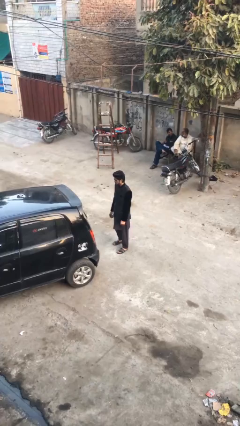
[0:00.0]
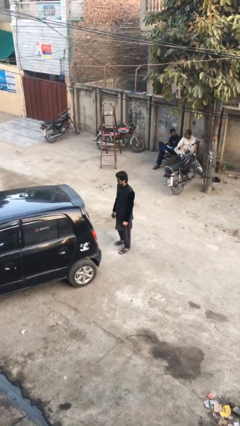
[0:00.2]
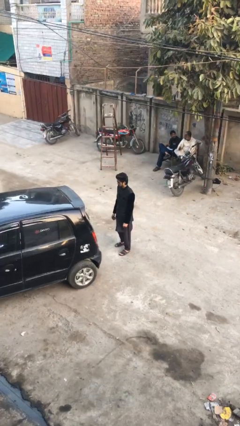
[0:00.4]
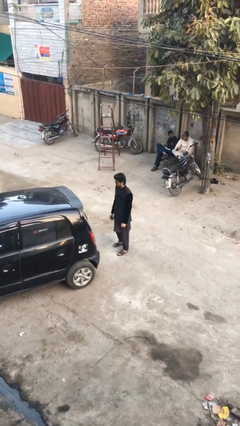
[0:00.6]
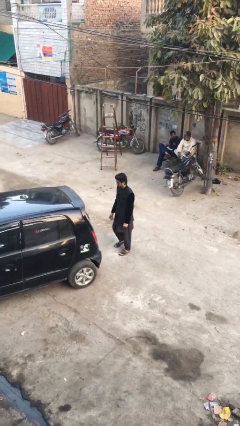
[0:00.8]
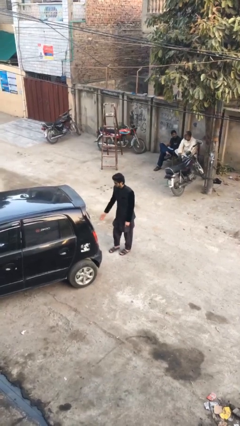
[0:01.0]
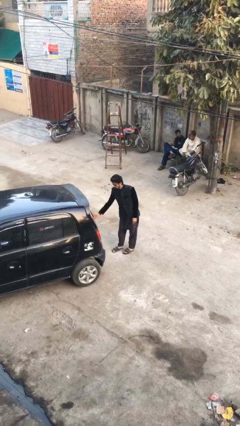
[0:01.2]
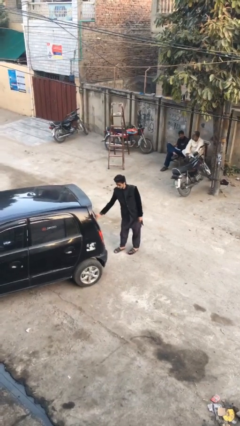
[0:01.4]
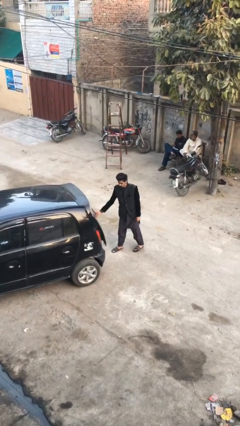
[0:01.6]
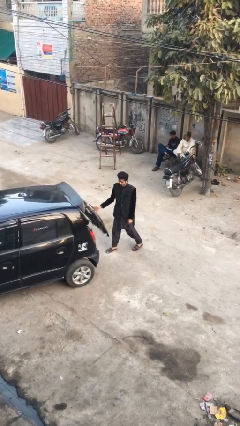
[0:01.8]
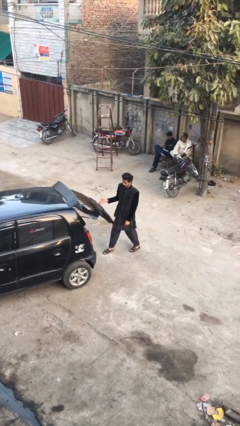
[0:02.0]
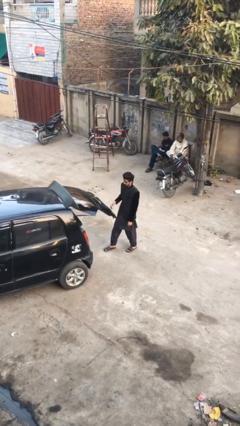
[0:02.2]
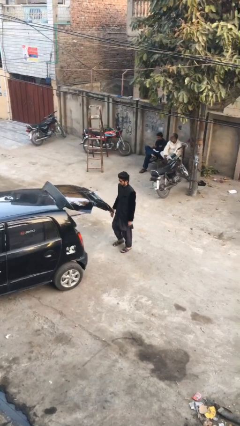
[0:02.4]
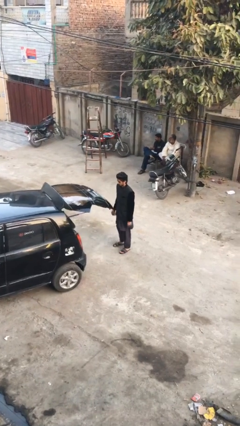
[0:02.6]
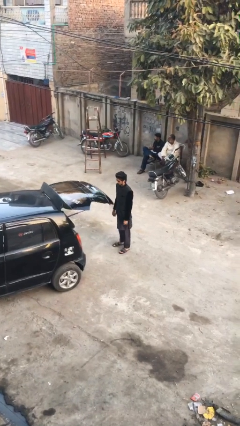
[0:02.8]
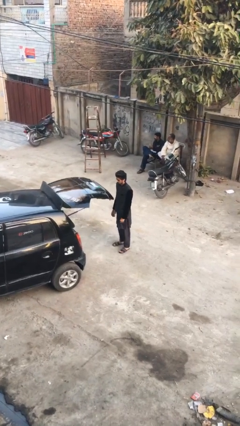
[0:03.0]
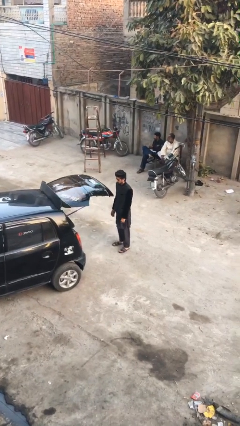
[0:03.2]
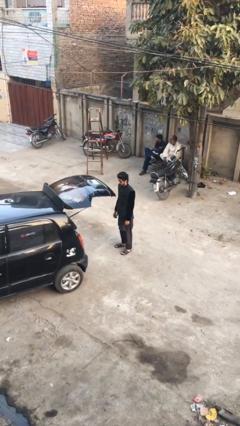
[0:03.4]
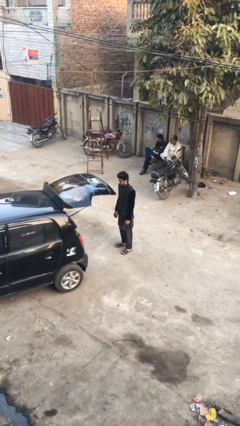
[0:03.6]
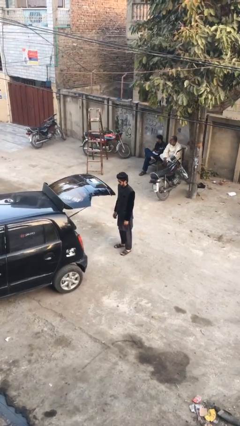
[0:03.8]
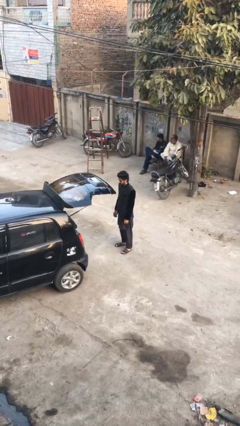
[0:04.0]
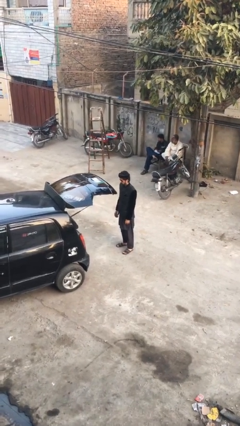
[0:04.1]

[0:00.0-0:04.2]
person opens car trunk

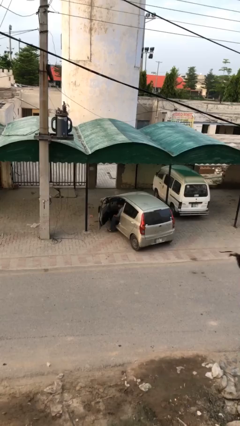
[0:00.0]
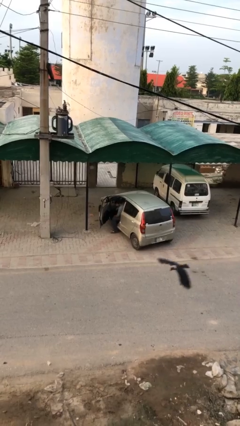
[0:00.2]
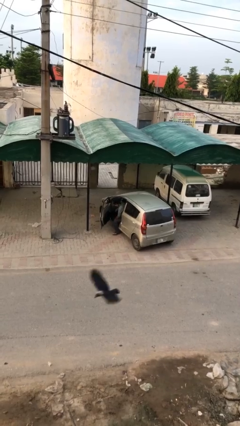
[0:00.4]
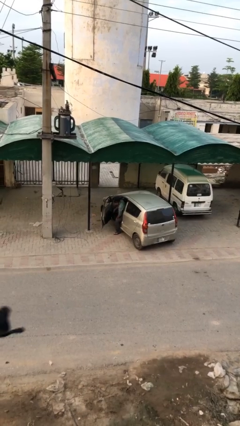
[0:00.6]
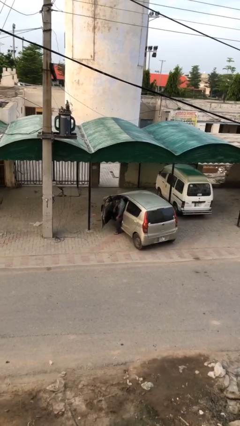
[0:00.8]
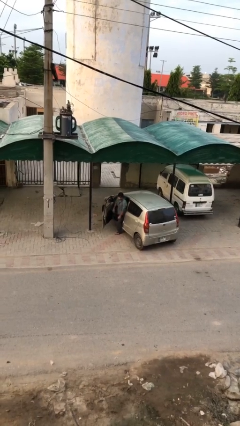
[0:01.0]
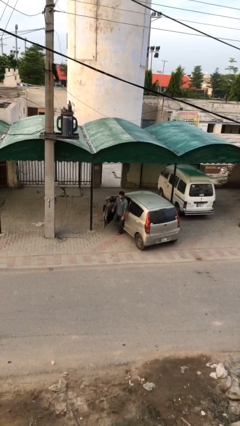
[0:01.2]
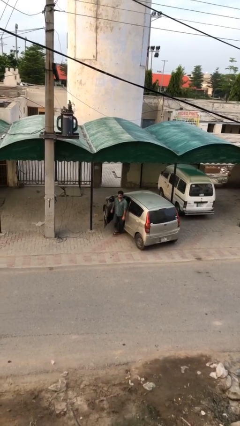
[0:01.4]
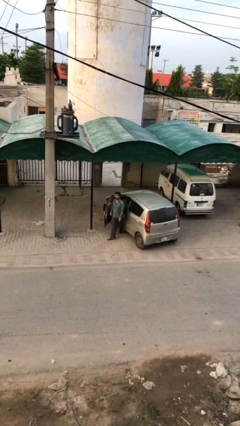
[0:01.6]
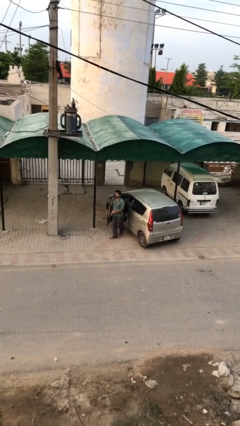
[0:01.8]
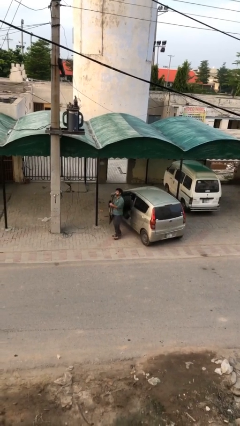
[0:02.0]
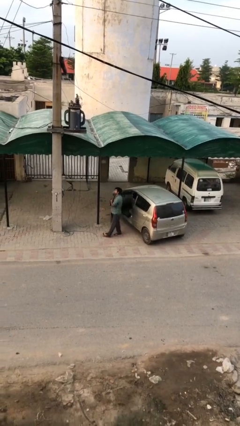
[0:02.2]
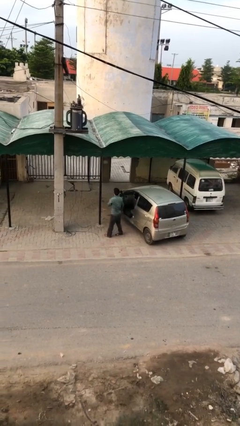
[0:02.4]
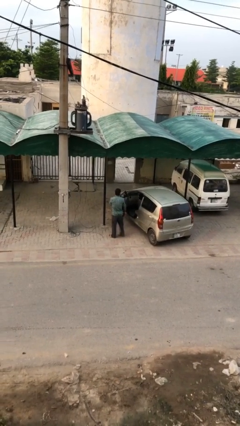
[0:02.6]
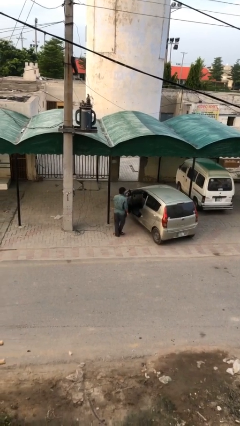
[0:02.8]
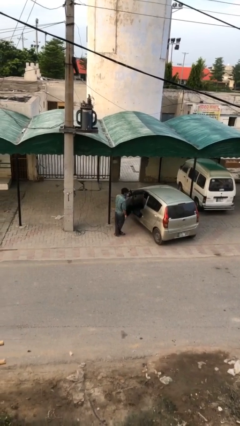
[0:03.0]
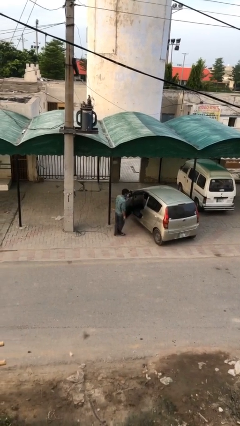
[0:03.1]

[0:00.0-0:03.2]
person exits car

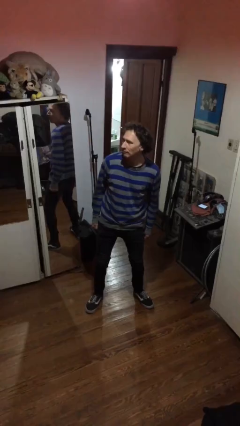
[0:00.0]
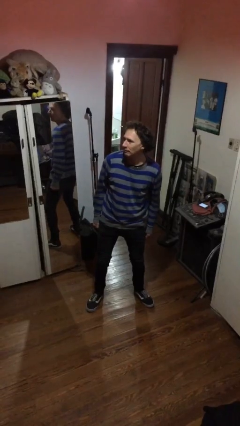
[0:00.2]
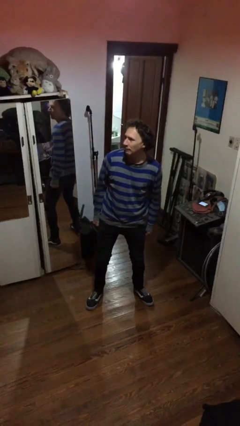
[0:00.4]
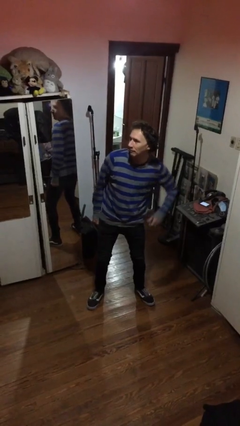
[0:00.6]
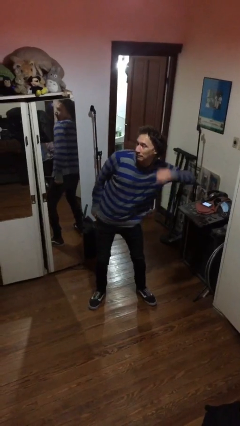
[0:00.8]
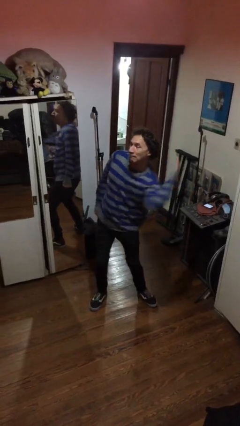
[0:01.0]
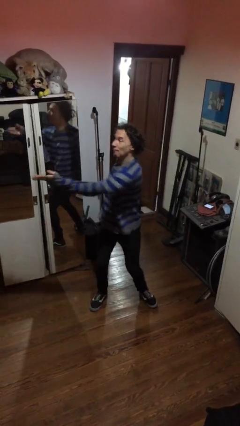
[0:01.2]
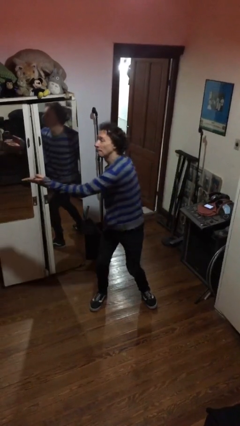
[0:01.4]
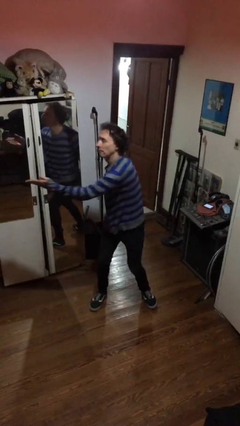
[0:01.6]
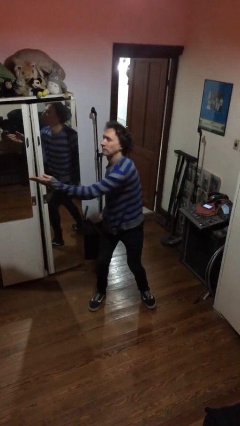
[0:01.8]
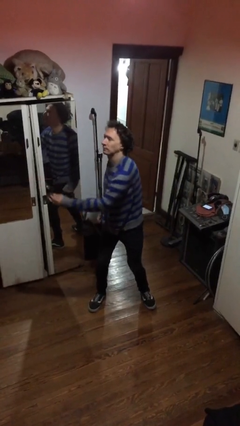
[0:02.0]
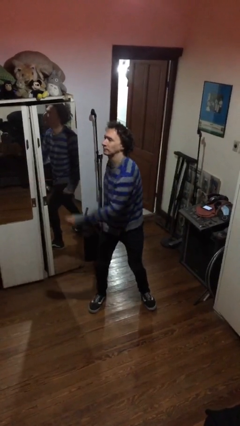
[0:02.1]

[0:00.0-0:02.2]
person karate chop

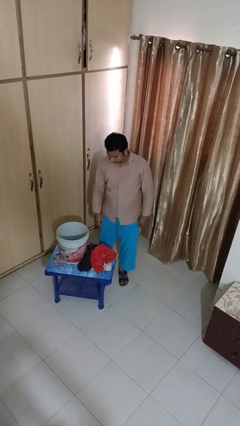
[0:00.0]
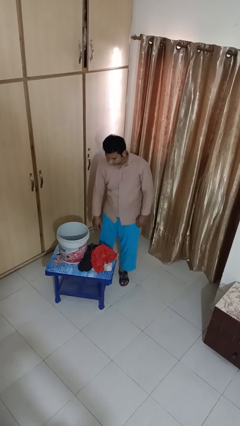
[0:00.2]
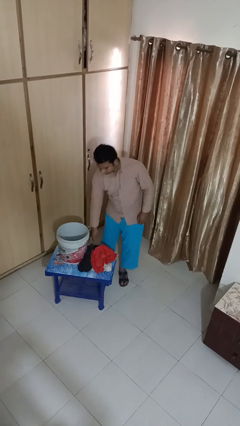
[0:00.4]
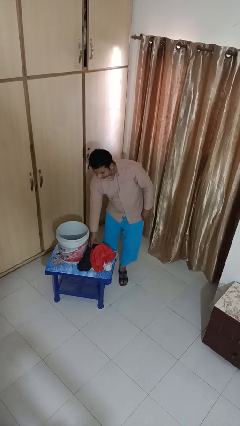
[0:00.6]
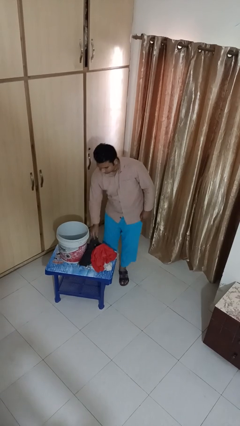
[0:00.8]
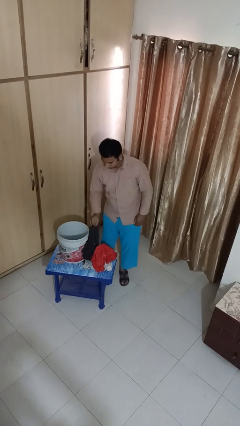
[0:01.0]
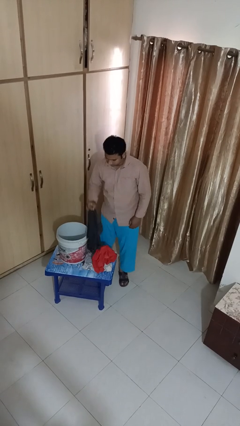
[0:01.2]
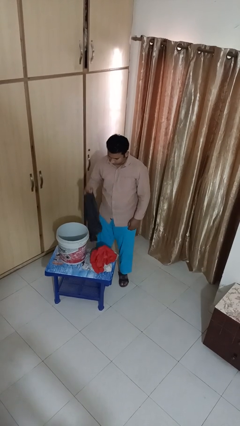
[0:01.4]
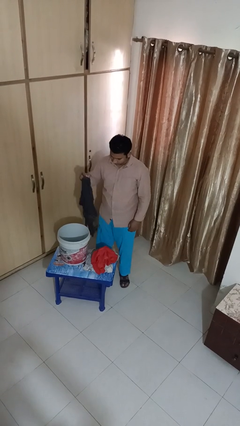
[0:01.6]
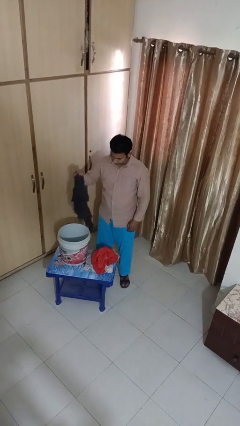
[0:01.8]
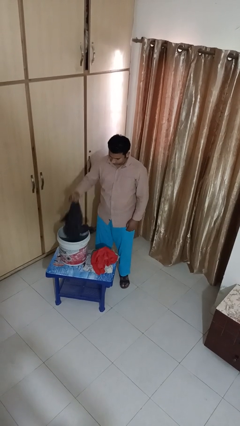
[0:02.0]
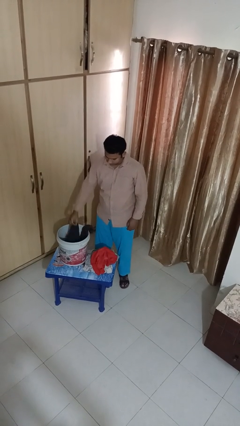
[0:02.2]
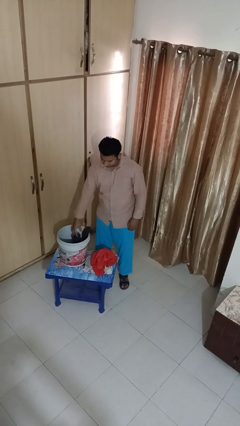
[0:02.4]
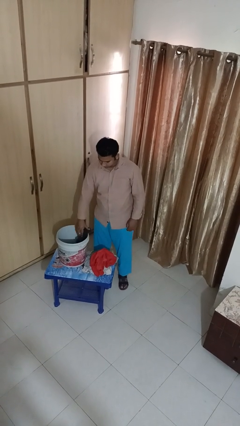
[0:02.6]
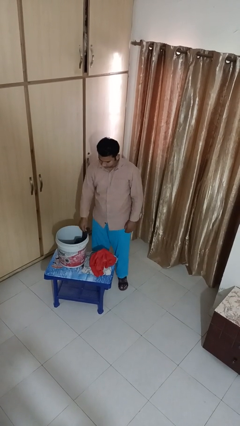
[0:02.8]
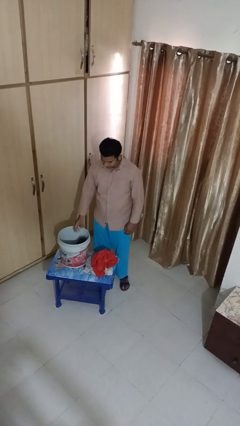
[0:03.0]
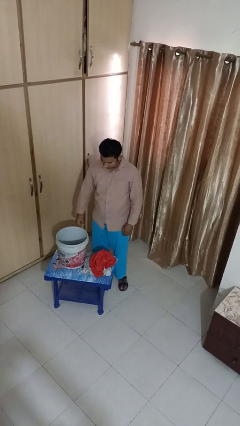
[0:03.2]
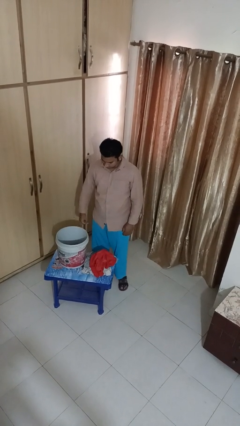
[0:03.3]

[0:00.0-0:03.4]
person puts object into basket

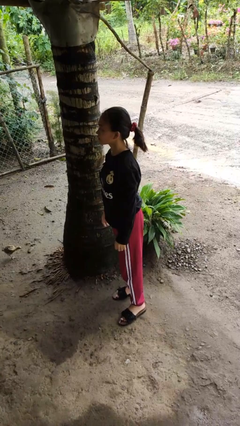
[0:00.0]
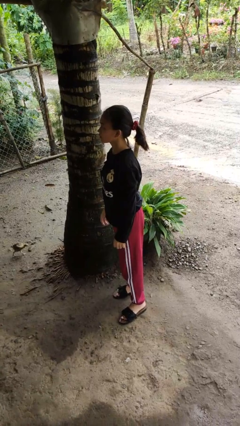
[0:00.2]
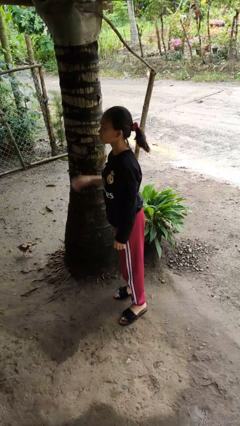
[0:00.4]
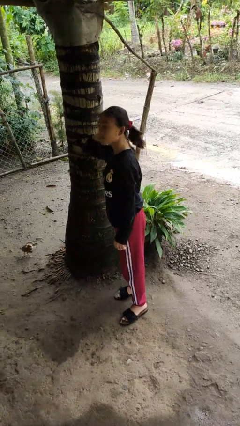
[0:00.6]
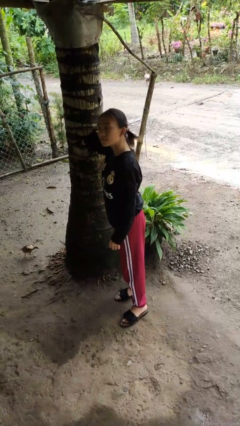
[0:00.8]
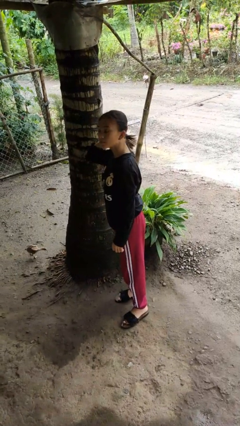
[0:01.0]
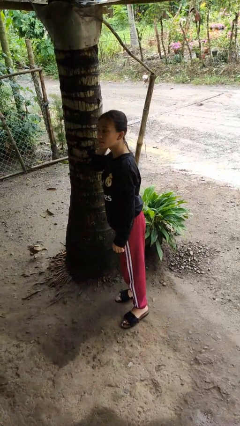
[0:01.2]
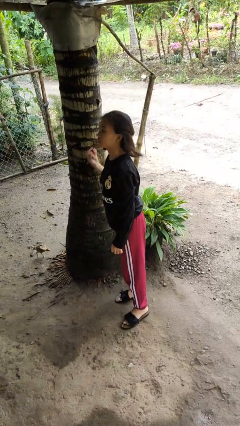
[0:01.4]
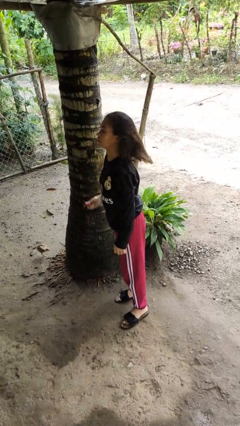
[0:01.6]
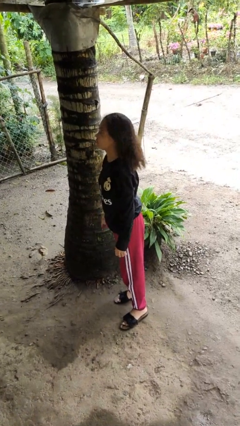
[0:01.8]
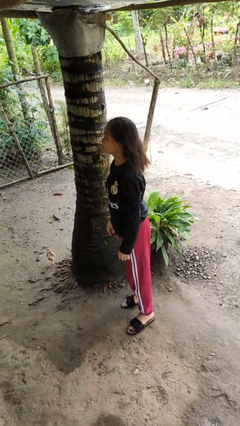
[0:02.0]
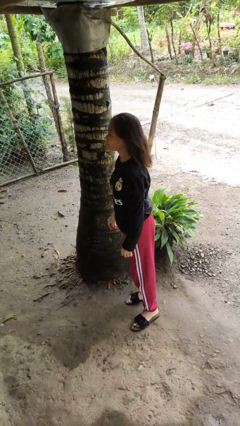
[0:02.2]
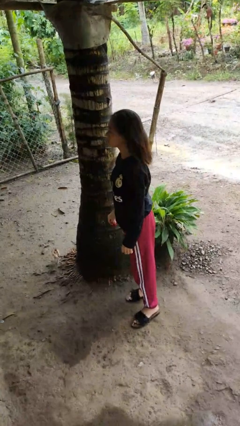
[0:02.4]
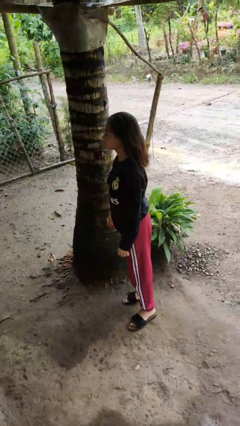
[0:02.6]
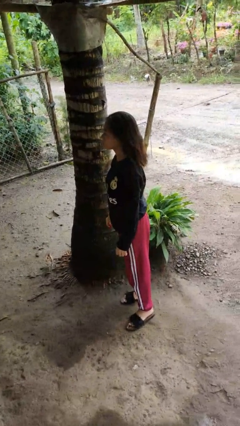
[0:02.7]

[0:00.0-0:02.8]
person takes off hairtie

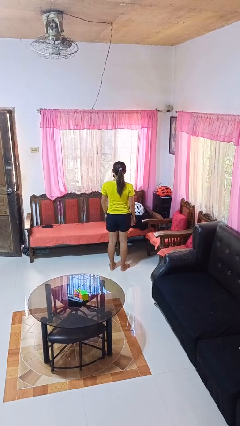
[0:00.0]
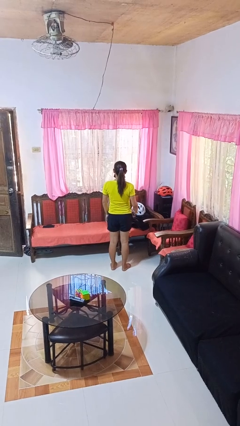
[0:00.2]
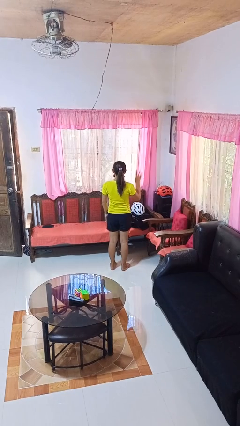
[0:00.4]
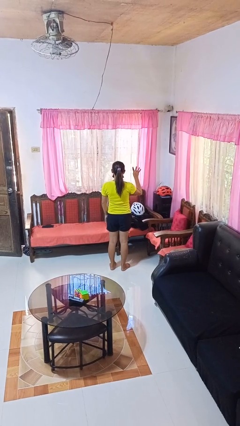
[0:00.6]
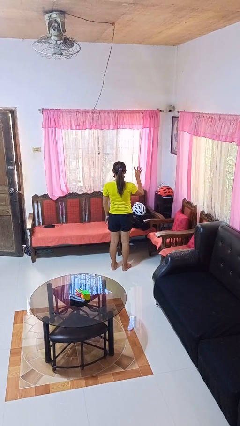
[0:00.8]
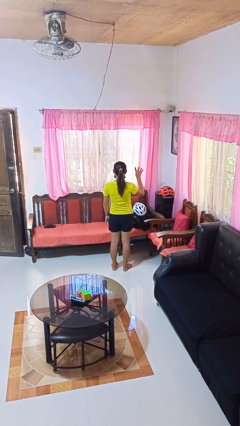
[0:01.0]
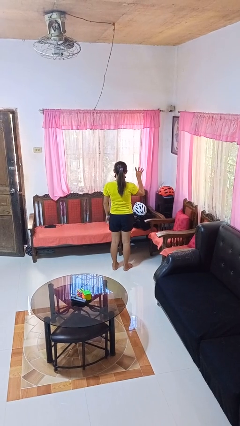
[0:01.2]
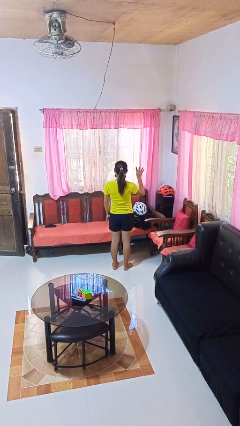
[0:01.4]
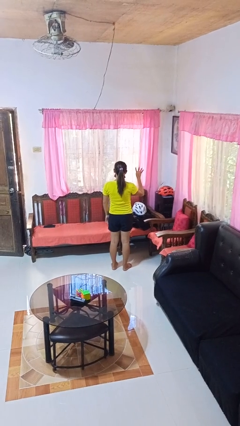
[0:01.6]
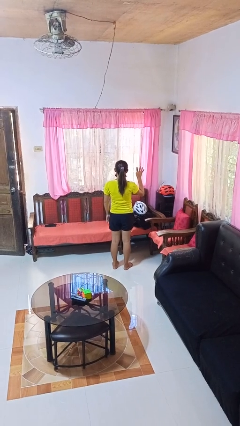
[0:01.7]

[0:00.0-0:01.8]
person gestures number four
